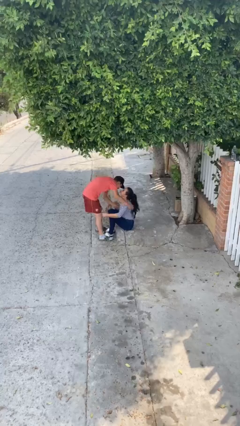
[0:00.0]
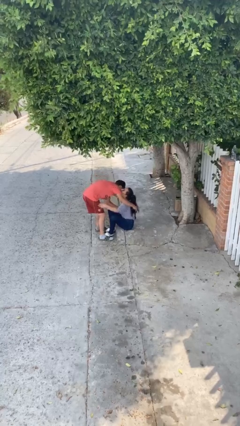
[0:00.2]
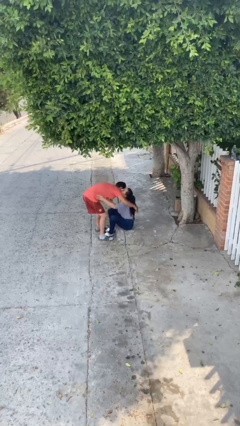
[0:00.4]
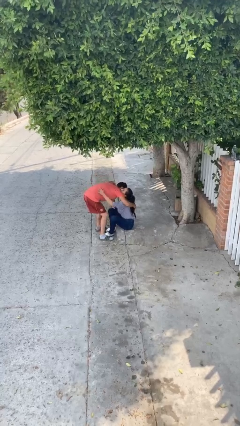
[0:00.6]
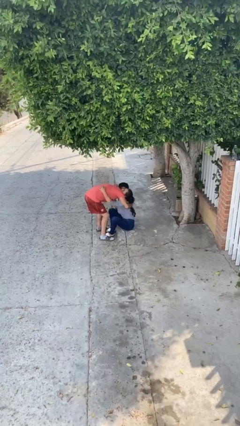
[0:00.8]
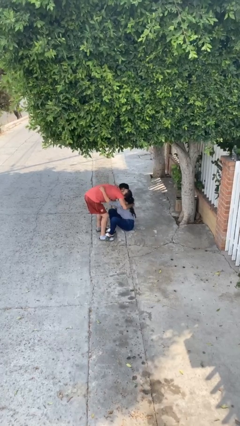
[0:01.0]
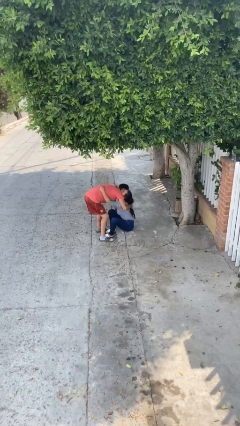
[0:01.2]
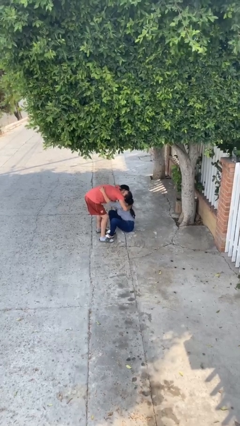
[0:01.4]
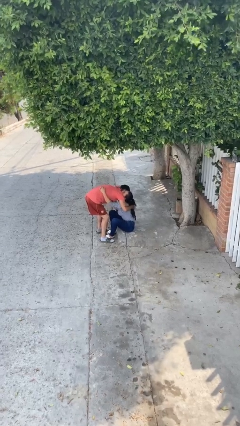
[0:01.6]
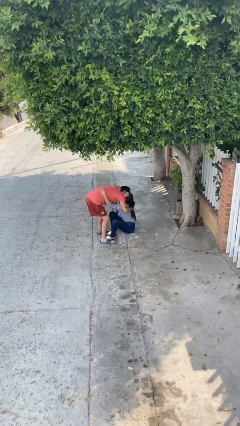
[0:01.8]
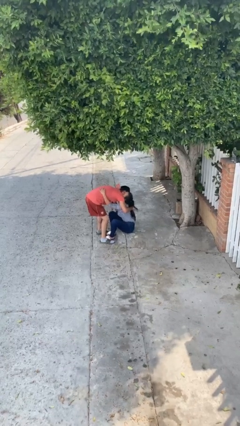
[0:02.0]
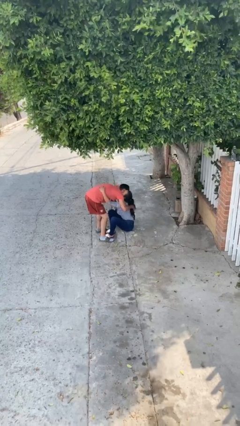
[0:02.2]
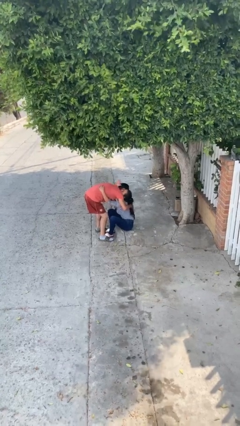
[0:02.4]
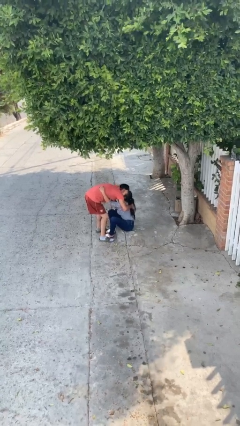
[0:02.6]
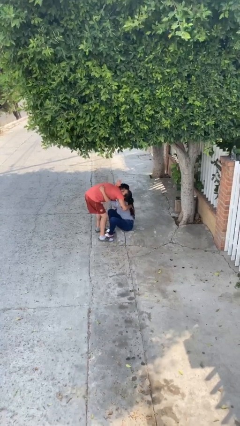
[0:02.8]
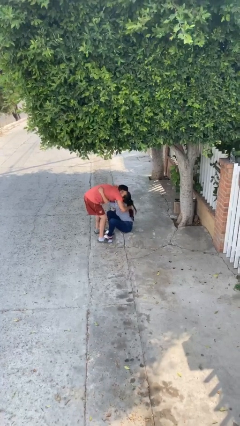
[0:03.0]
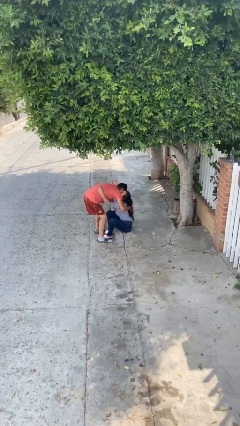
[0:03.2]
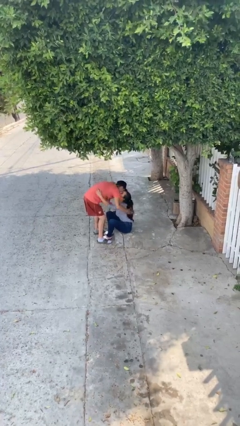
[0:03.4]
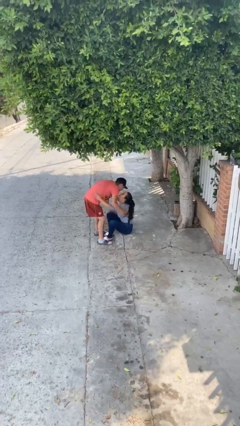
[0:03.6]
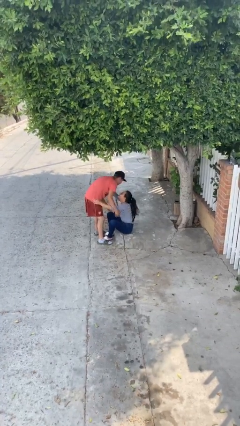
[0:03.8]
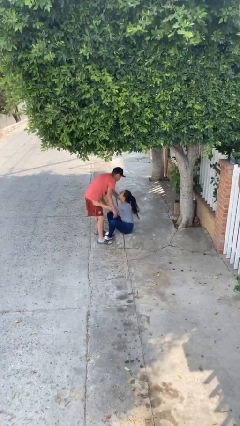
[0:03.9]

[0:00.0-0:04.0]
person embraces person

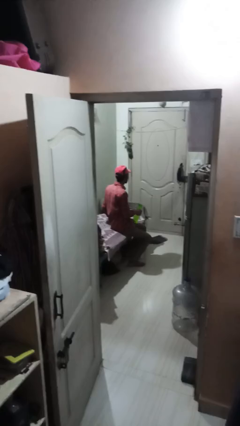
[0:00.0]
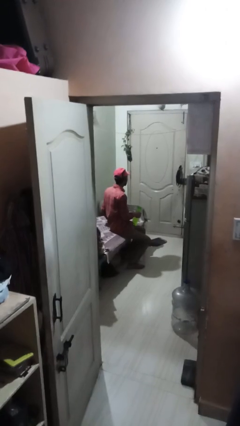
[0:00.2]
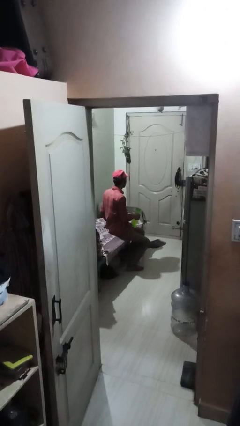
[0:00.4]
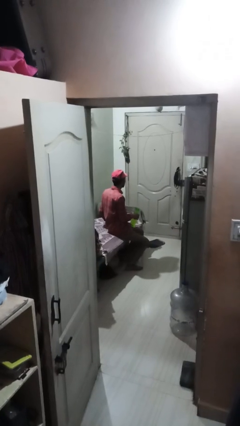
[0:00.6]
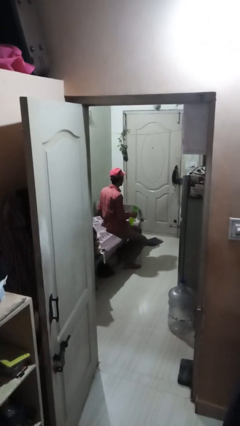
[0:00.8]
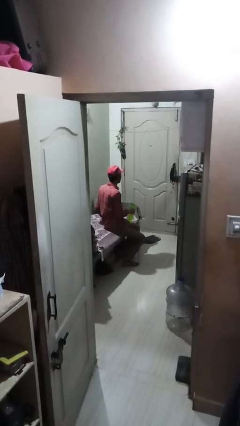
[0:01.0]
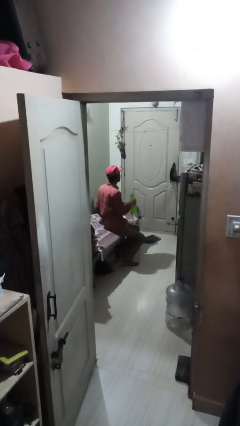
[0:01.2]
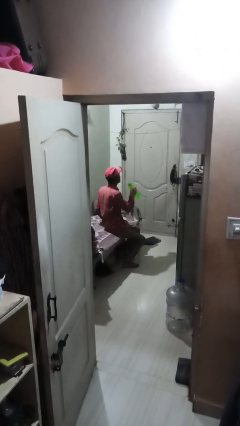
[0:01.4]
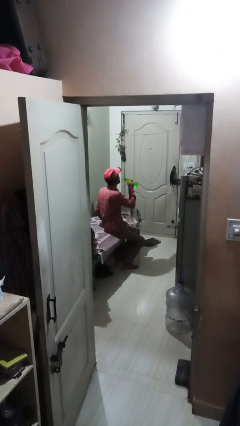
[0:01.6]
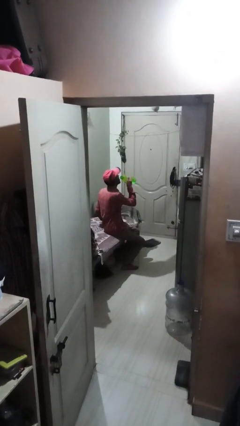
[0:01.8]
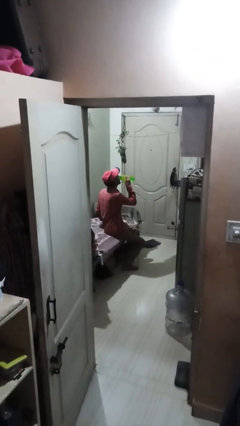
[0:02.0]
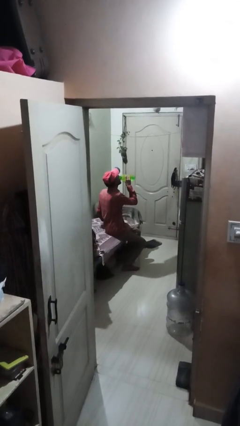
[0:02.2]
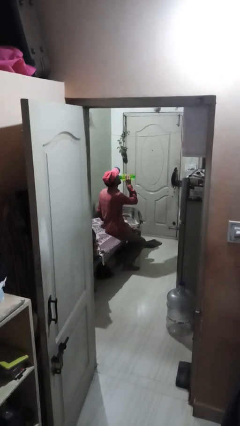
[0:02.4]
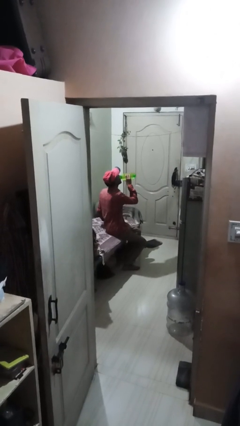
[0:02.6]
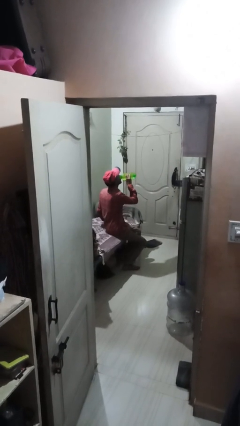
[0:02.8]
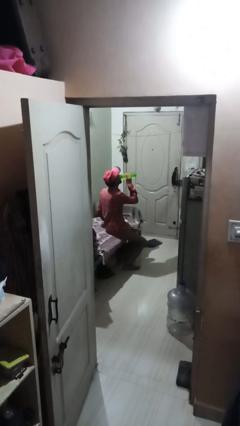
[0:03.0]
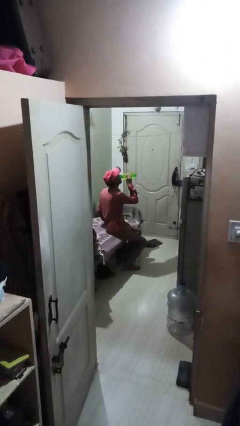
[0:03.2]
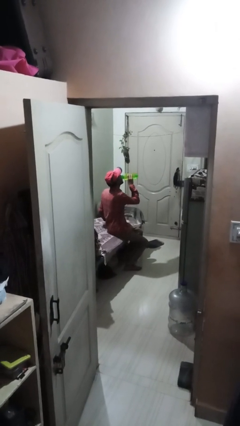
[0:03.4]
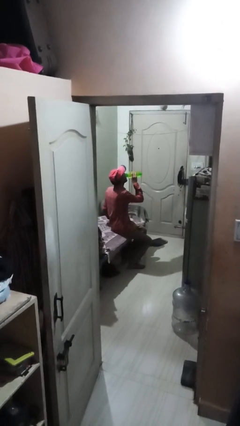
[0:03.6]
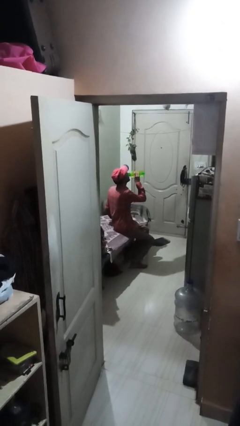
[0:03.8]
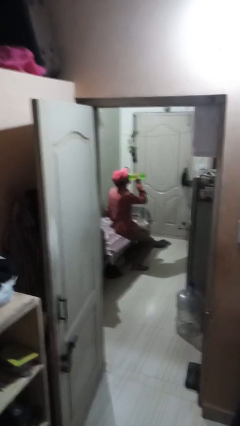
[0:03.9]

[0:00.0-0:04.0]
person drinks from bottle

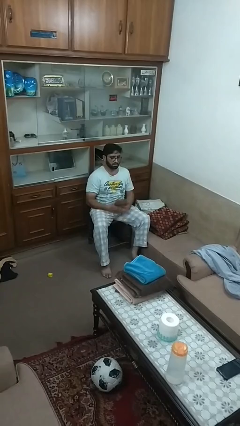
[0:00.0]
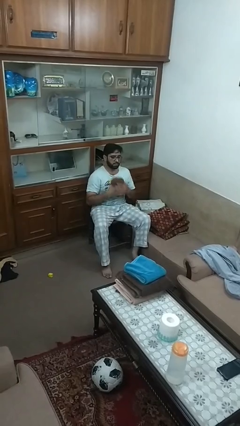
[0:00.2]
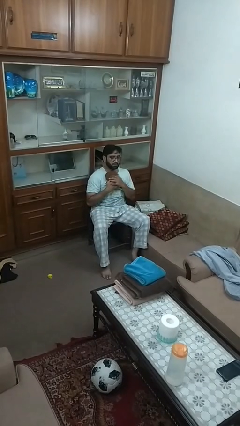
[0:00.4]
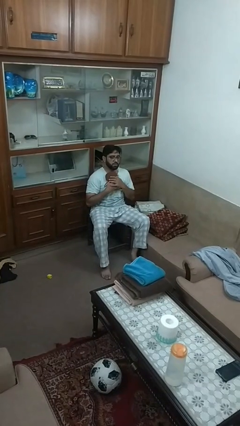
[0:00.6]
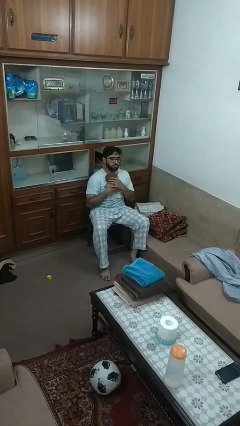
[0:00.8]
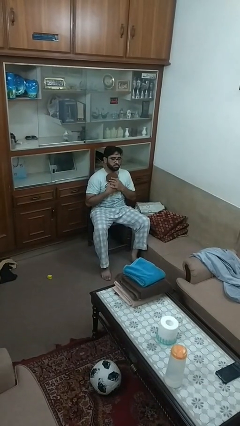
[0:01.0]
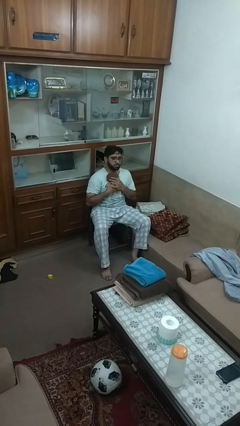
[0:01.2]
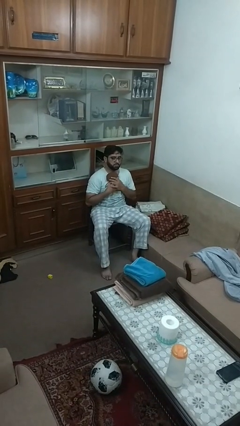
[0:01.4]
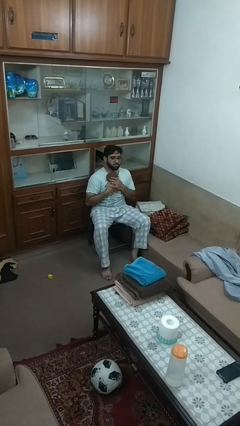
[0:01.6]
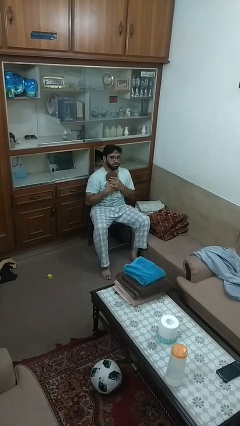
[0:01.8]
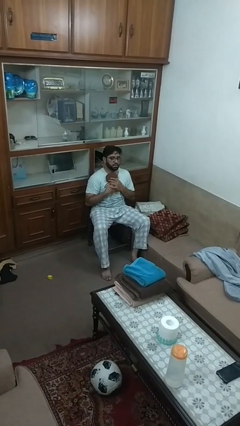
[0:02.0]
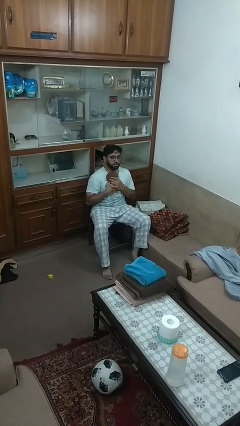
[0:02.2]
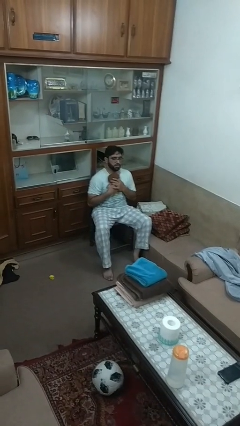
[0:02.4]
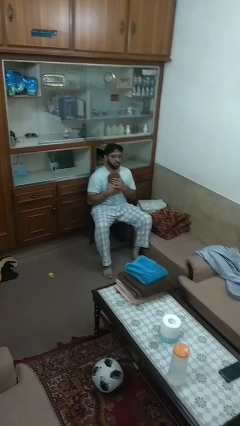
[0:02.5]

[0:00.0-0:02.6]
person hugs stuffed animal

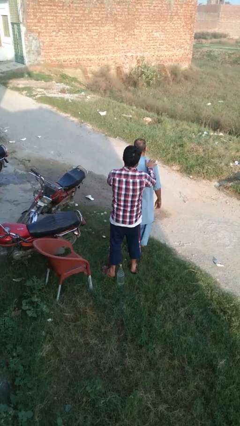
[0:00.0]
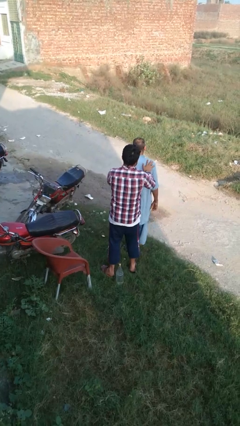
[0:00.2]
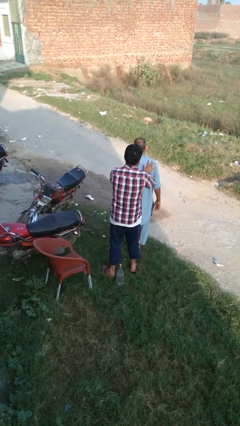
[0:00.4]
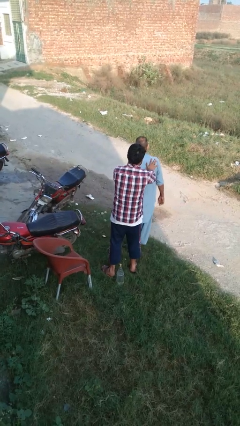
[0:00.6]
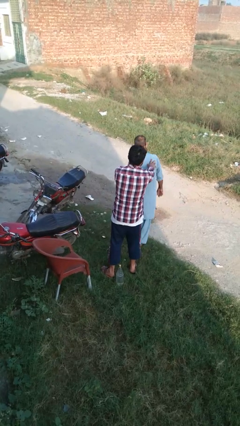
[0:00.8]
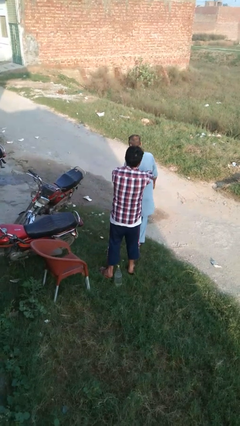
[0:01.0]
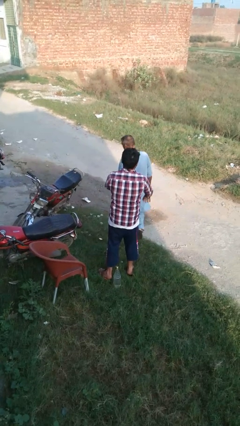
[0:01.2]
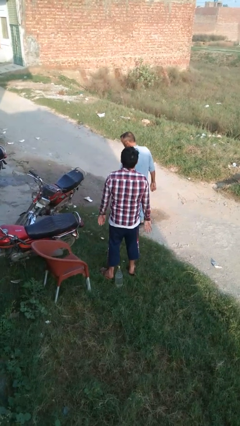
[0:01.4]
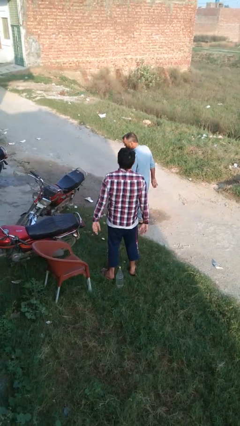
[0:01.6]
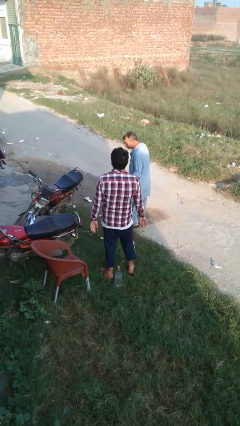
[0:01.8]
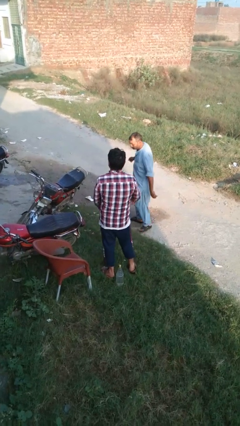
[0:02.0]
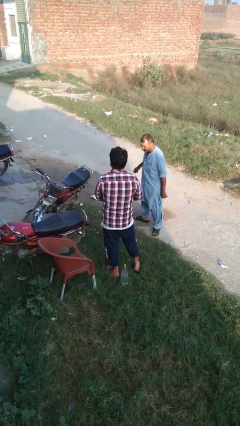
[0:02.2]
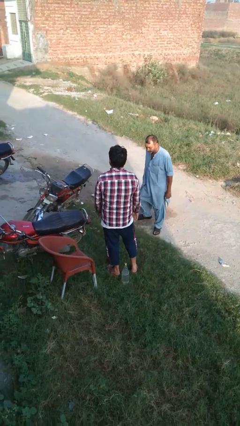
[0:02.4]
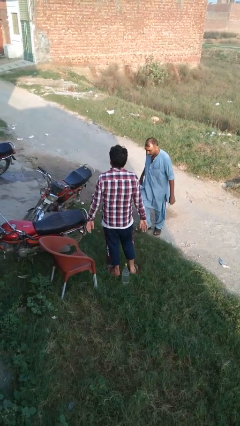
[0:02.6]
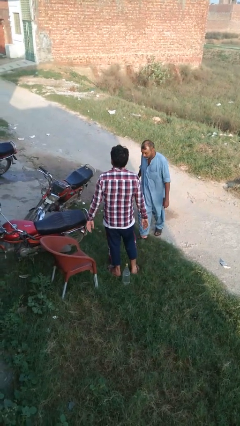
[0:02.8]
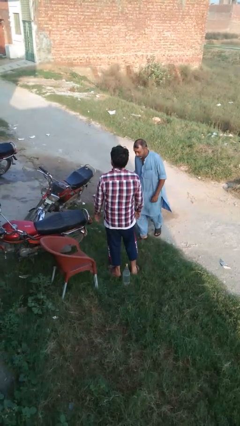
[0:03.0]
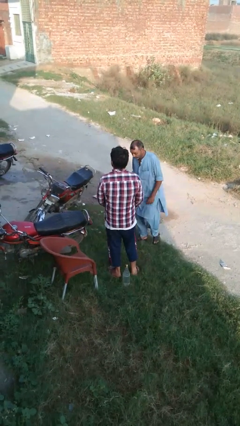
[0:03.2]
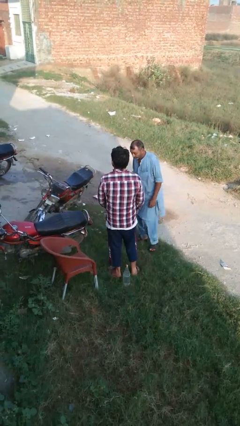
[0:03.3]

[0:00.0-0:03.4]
person spins person around

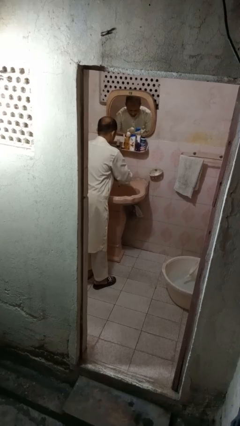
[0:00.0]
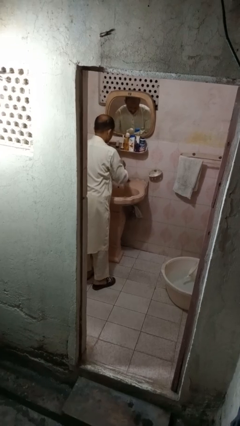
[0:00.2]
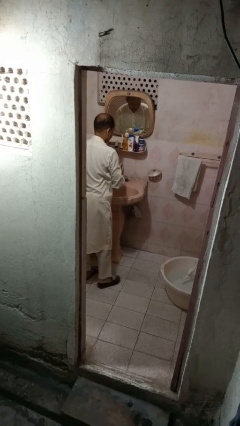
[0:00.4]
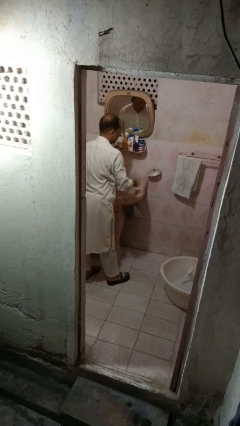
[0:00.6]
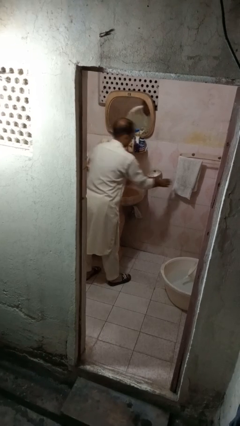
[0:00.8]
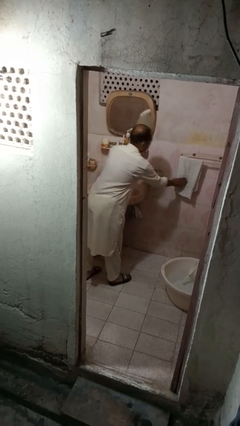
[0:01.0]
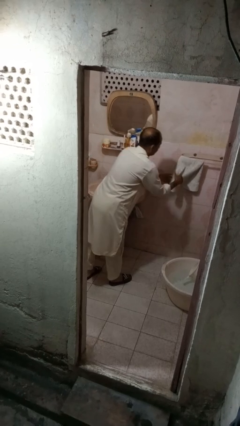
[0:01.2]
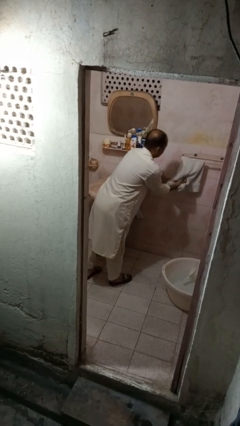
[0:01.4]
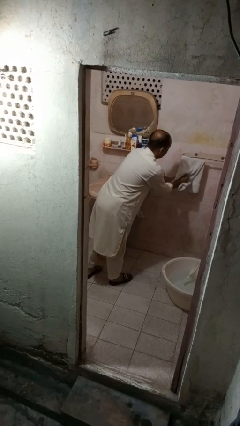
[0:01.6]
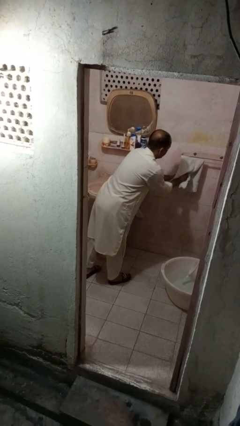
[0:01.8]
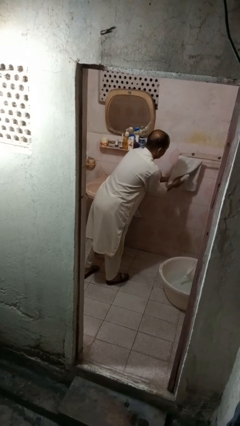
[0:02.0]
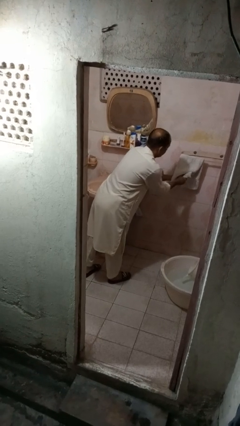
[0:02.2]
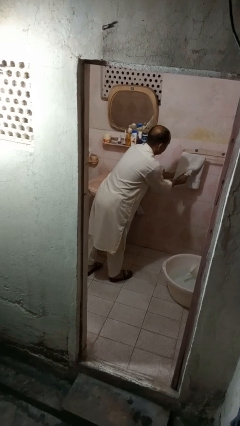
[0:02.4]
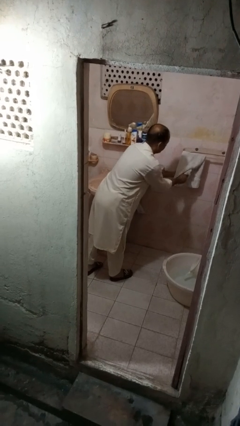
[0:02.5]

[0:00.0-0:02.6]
person dries hands with towel

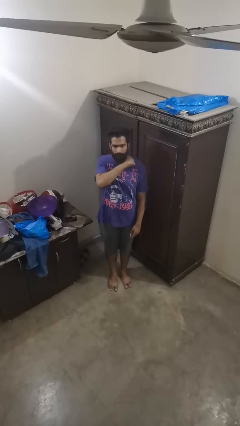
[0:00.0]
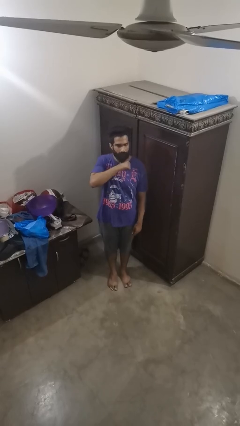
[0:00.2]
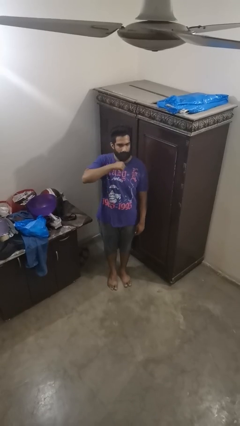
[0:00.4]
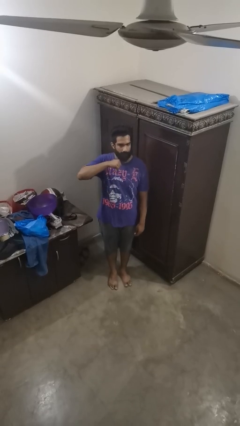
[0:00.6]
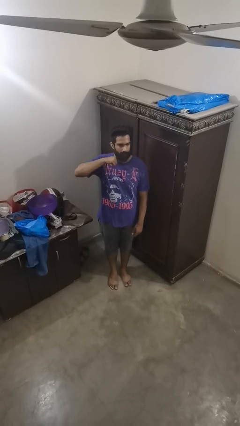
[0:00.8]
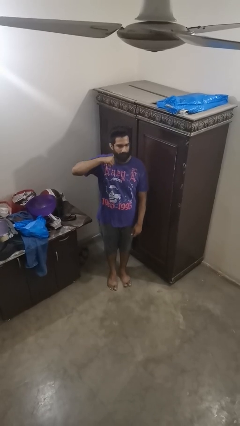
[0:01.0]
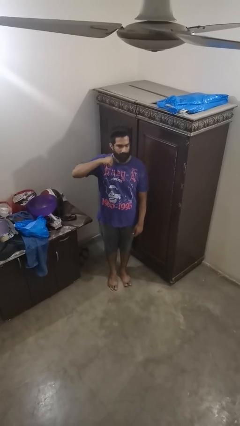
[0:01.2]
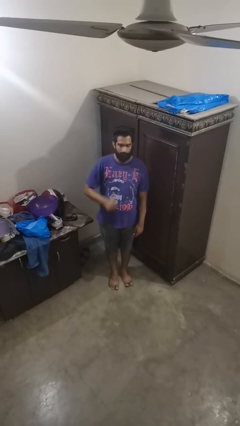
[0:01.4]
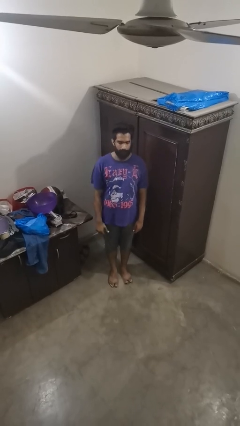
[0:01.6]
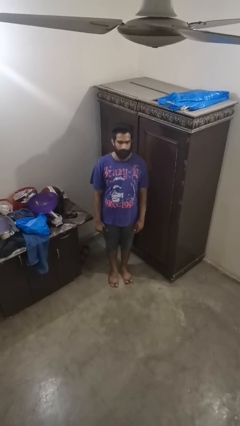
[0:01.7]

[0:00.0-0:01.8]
person gestures cut
